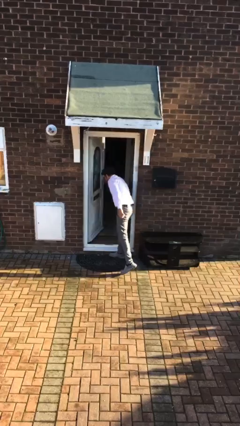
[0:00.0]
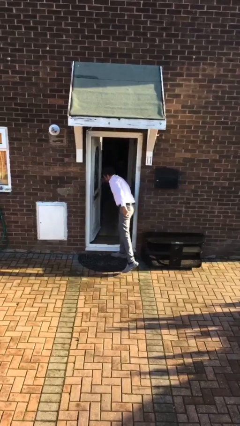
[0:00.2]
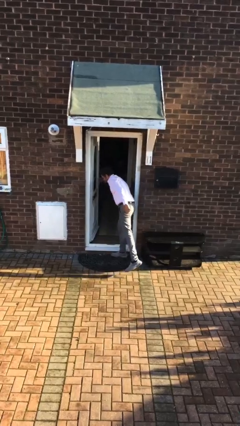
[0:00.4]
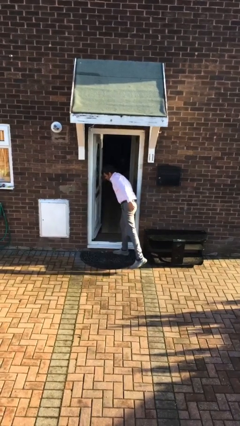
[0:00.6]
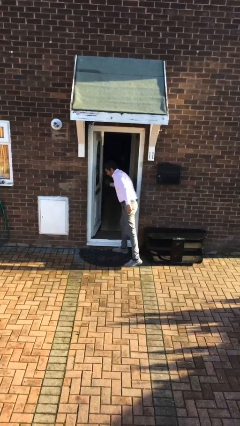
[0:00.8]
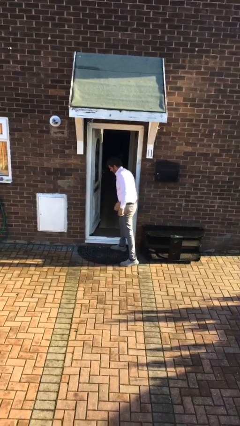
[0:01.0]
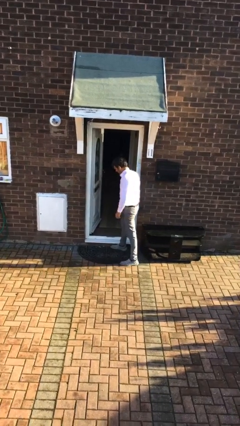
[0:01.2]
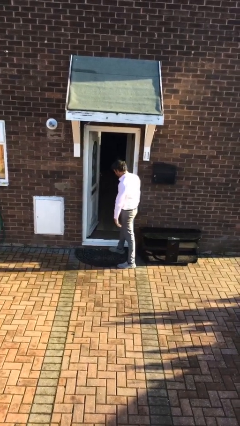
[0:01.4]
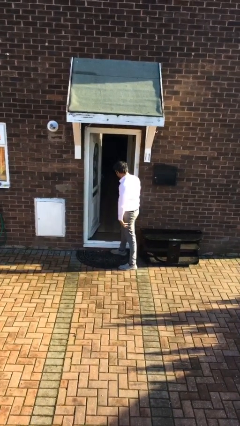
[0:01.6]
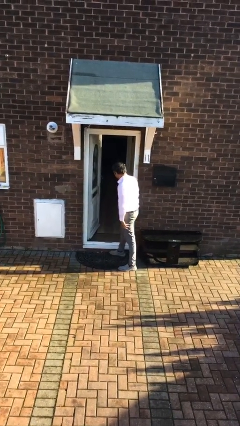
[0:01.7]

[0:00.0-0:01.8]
person opens facility door

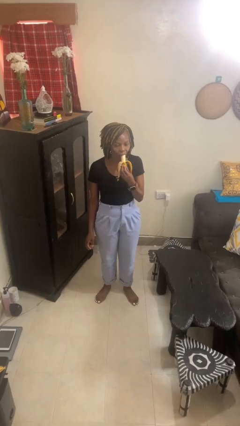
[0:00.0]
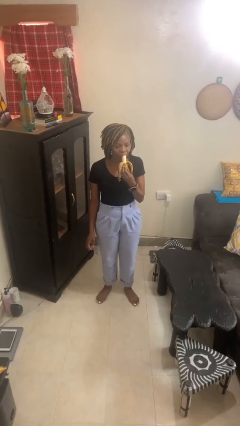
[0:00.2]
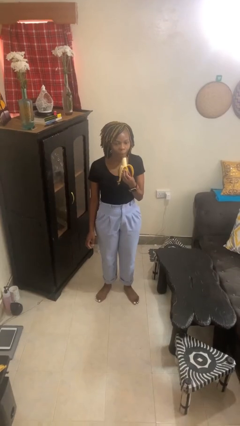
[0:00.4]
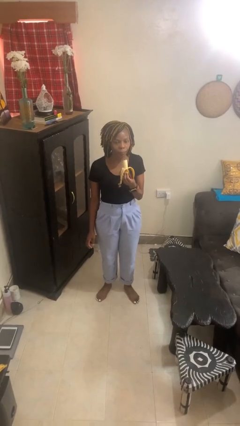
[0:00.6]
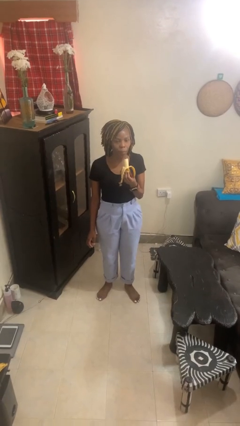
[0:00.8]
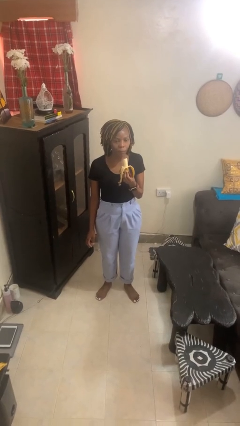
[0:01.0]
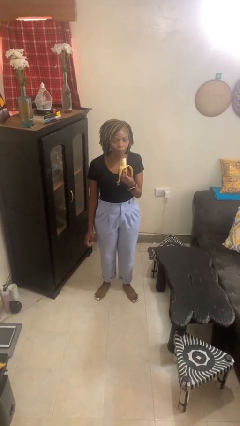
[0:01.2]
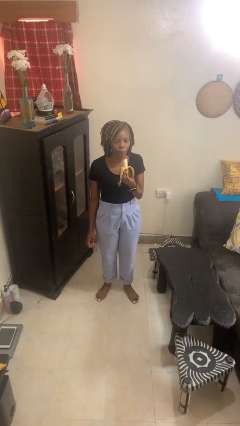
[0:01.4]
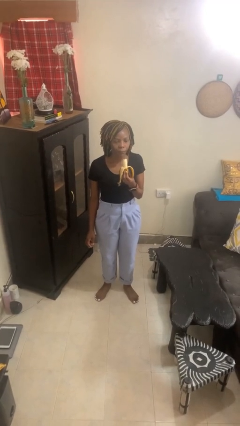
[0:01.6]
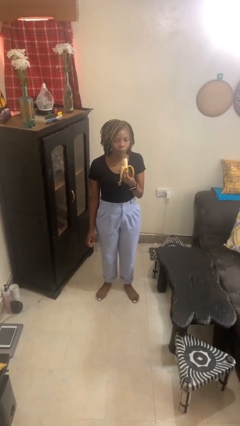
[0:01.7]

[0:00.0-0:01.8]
person eats banana

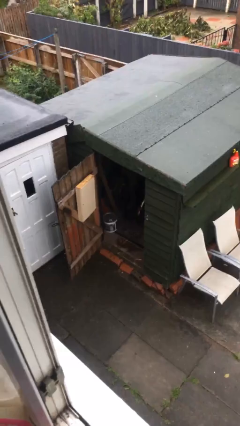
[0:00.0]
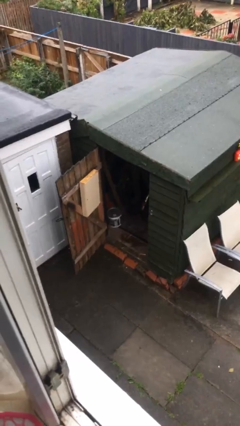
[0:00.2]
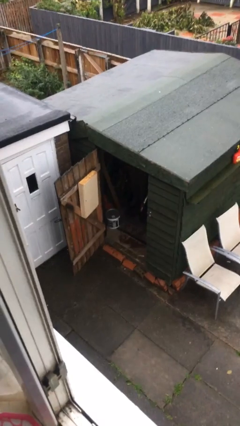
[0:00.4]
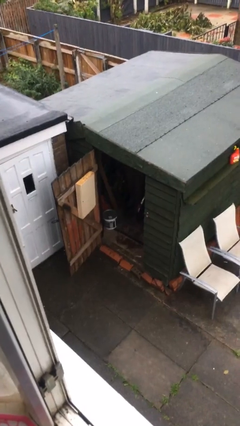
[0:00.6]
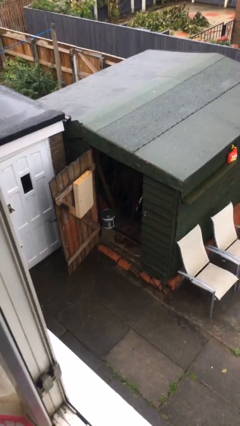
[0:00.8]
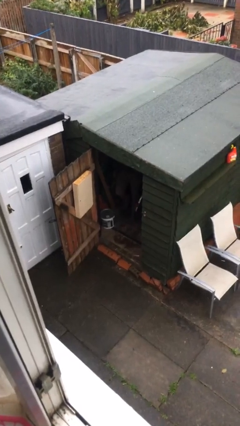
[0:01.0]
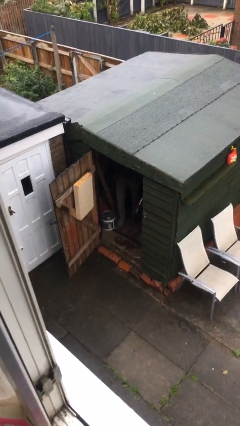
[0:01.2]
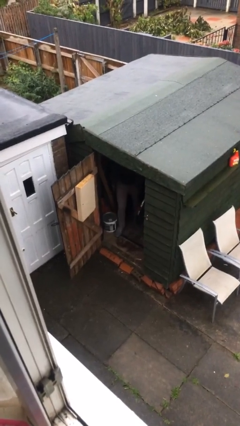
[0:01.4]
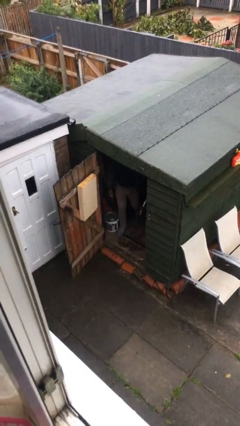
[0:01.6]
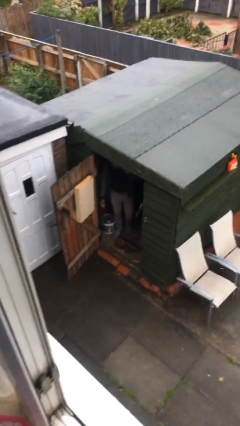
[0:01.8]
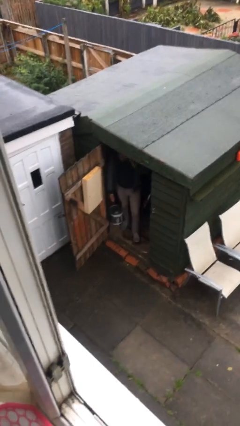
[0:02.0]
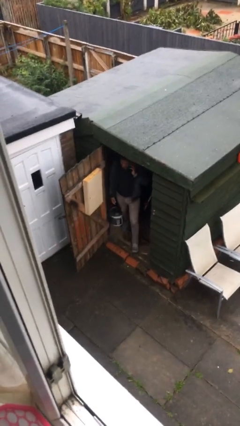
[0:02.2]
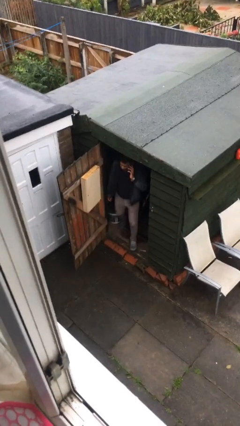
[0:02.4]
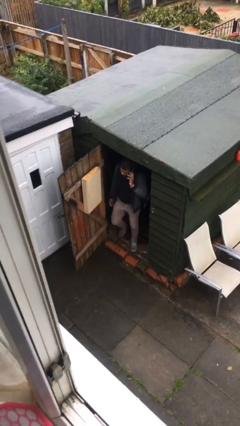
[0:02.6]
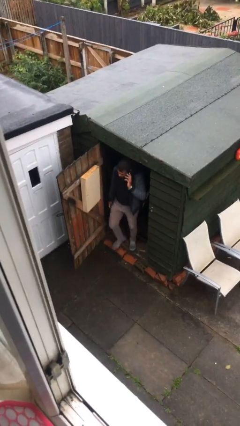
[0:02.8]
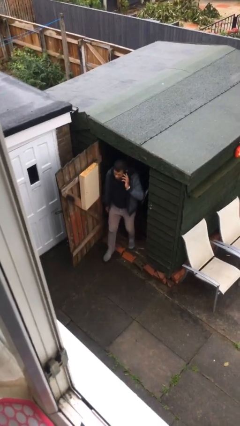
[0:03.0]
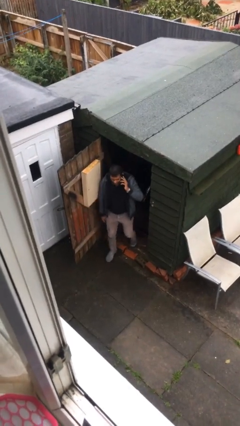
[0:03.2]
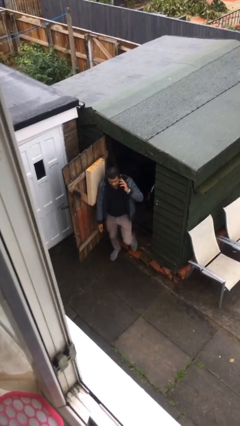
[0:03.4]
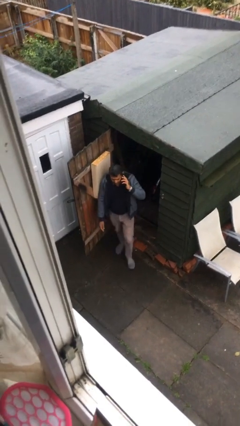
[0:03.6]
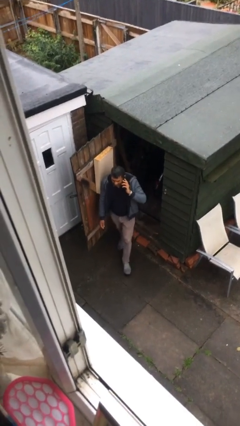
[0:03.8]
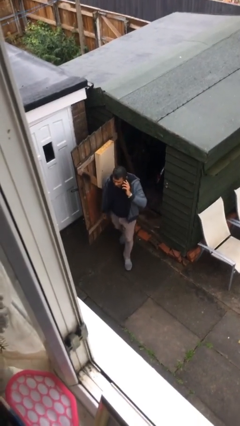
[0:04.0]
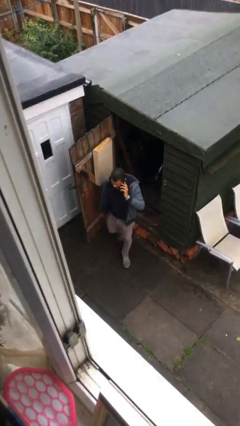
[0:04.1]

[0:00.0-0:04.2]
person enters scene through structure

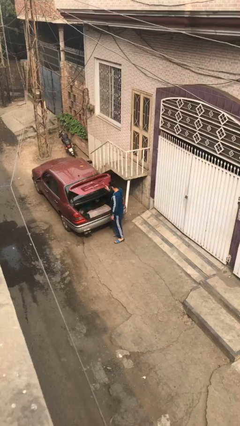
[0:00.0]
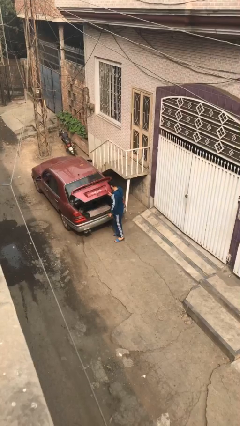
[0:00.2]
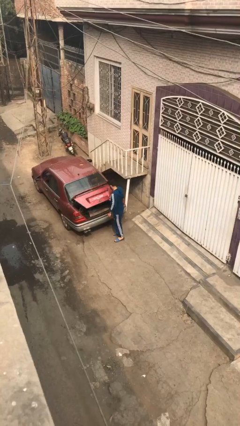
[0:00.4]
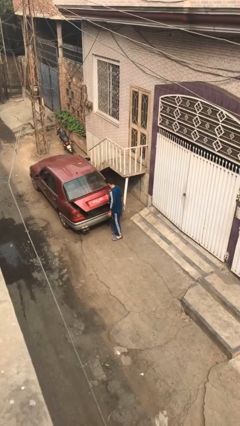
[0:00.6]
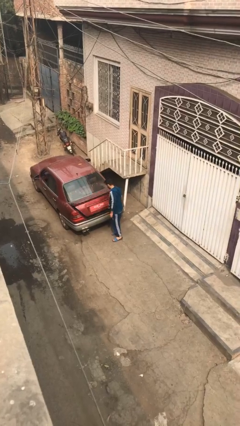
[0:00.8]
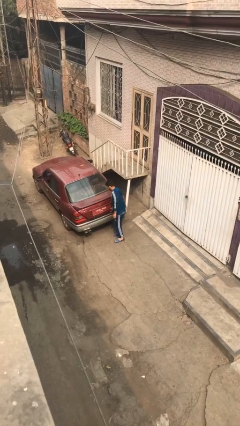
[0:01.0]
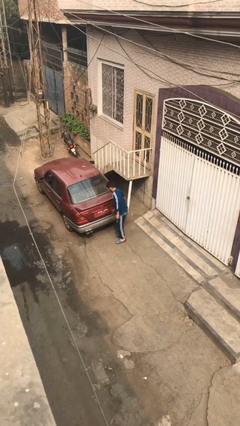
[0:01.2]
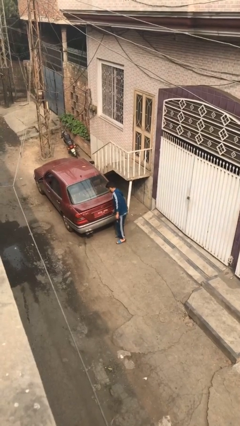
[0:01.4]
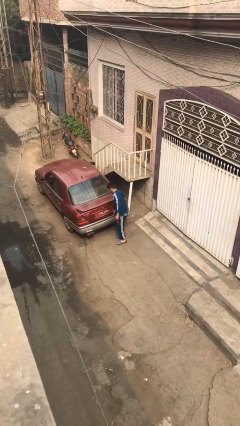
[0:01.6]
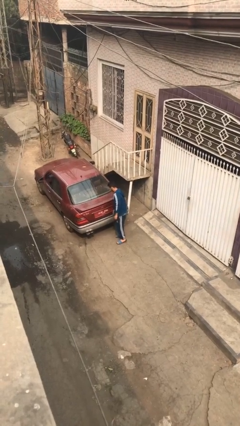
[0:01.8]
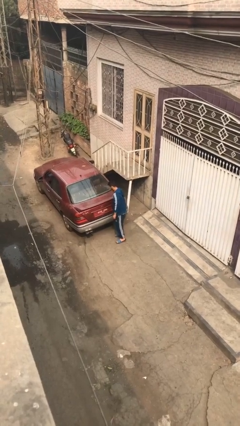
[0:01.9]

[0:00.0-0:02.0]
person closes car trunk

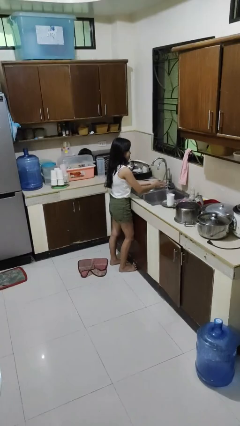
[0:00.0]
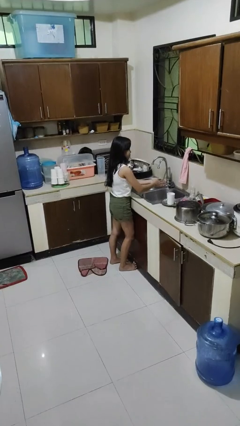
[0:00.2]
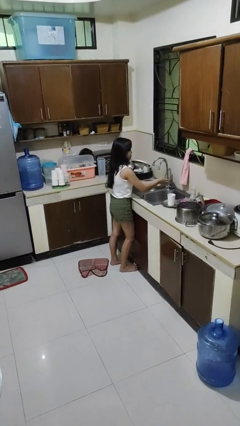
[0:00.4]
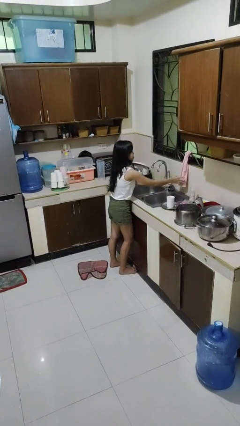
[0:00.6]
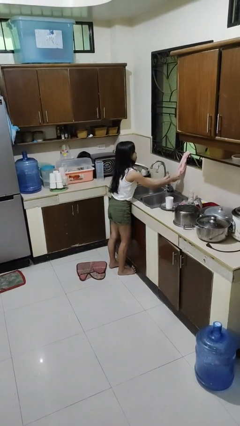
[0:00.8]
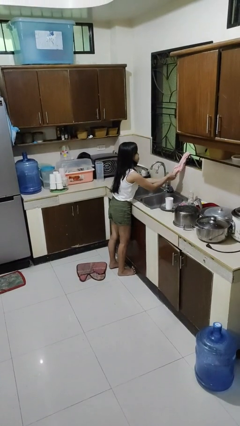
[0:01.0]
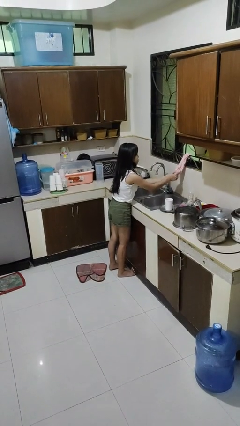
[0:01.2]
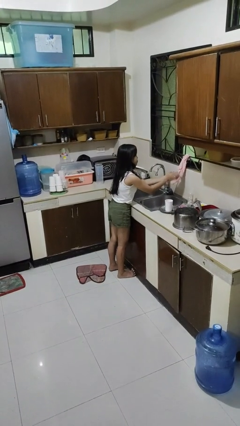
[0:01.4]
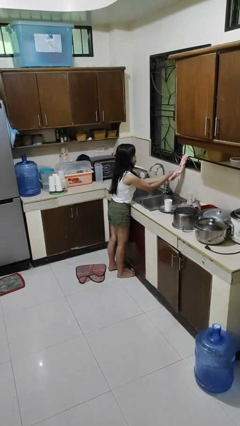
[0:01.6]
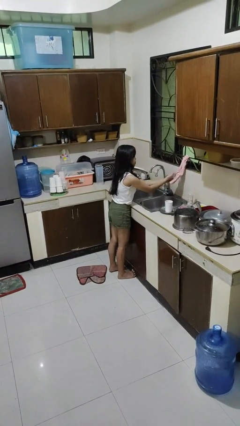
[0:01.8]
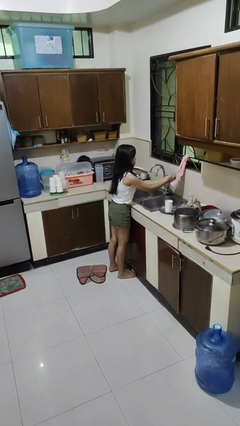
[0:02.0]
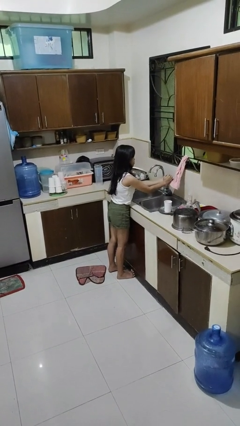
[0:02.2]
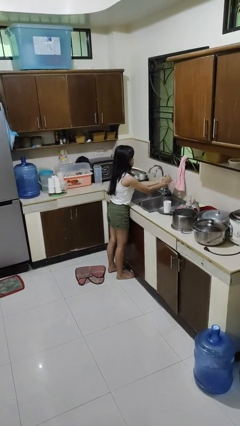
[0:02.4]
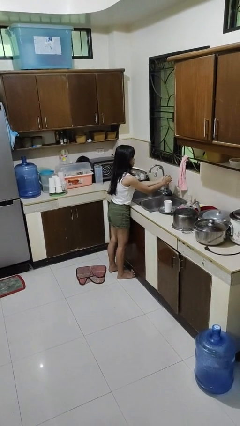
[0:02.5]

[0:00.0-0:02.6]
person dries hands with towel

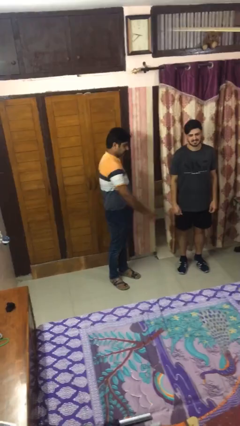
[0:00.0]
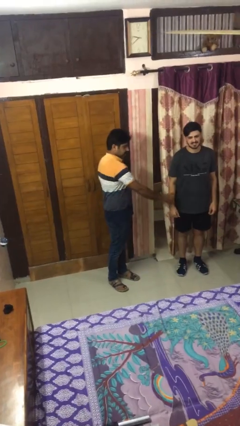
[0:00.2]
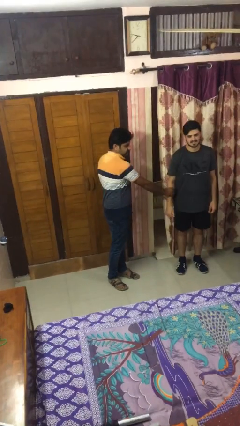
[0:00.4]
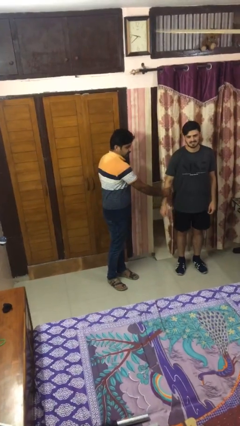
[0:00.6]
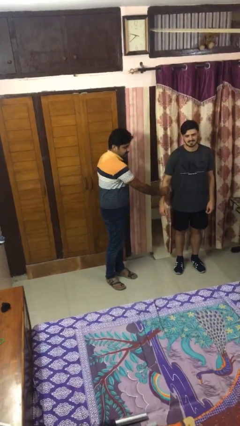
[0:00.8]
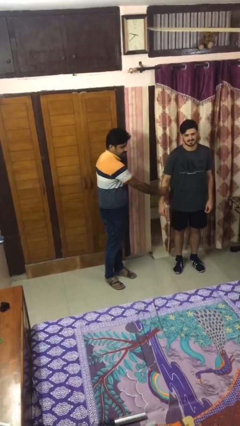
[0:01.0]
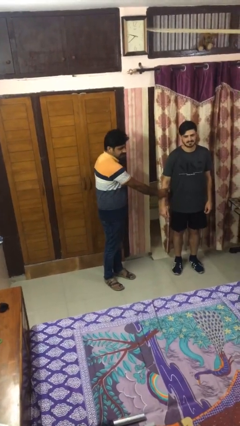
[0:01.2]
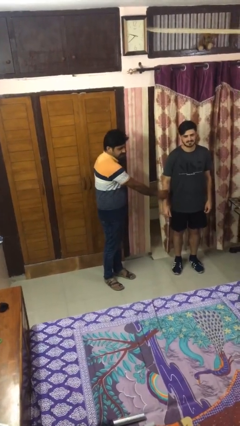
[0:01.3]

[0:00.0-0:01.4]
person grabs person by forearm

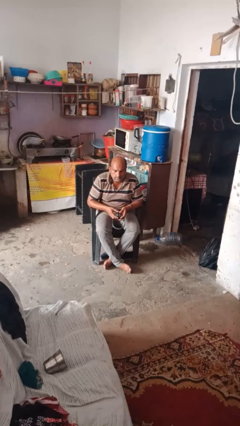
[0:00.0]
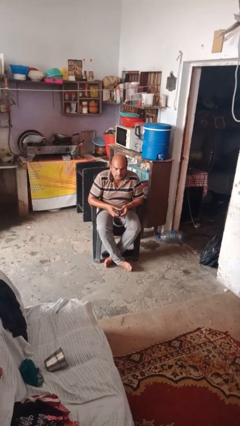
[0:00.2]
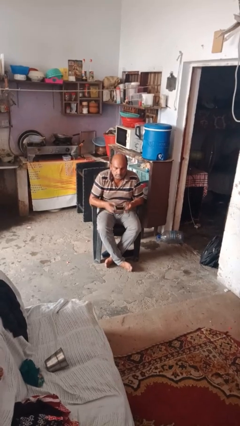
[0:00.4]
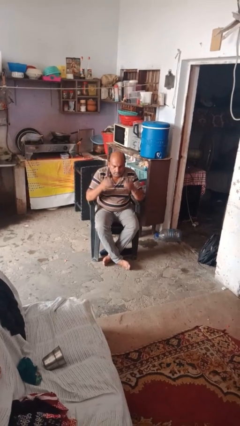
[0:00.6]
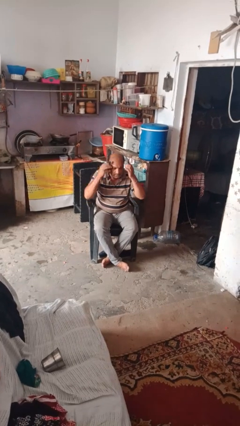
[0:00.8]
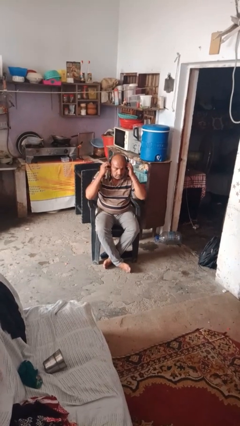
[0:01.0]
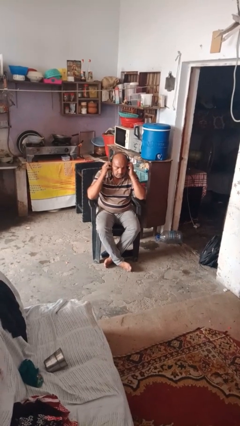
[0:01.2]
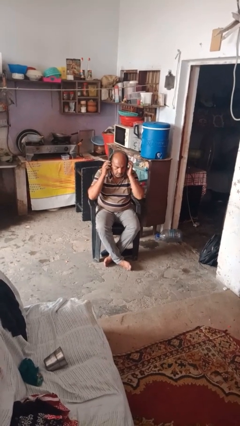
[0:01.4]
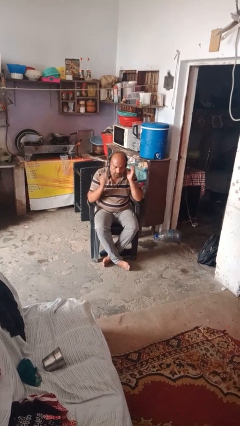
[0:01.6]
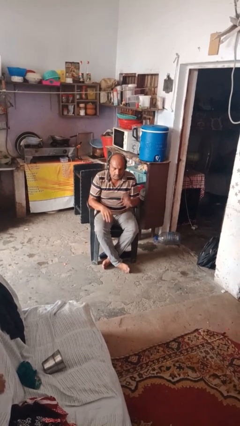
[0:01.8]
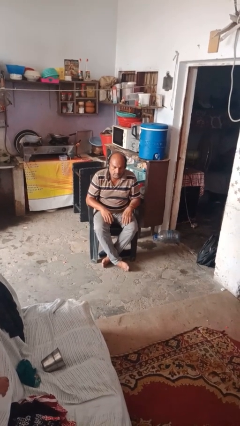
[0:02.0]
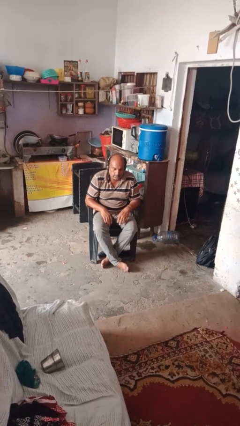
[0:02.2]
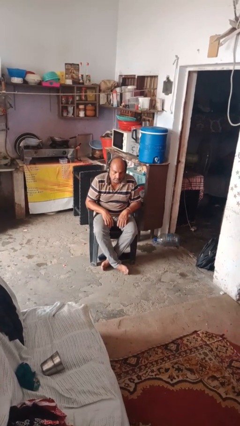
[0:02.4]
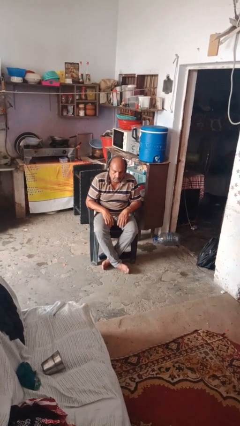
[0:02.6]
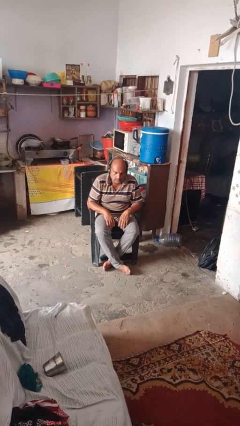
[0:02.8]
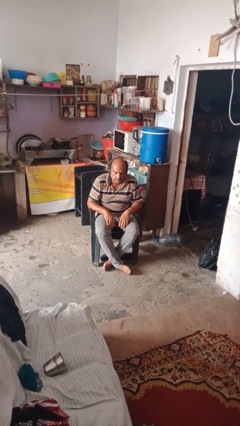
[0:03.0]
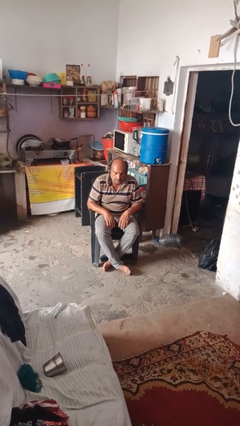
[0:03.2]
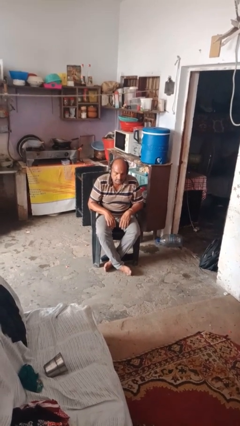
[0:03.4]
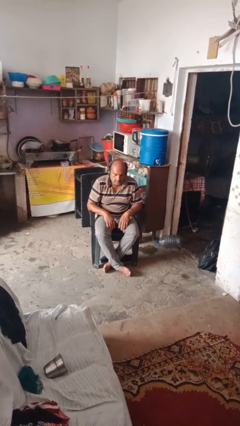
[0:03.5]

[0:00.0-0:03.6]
person puts on headphones
